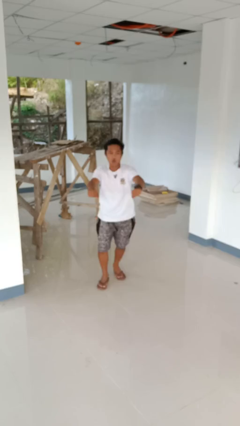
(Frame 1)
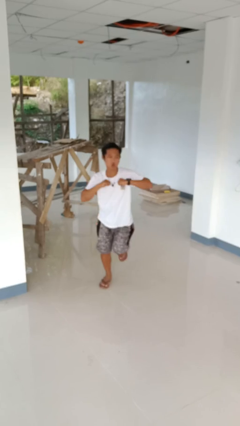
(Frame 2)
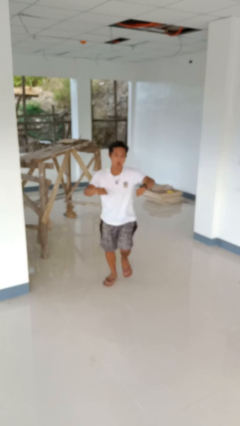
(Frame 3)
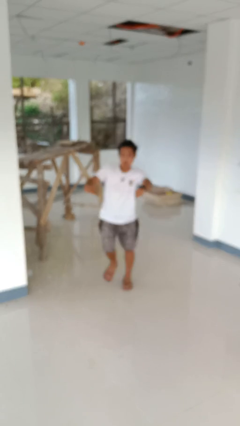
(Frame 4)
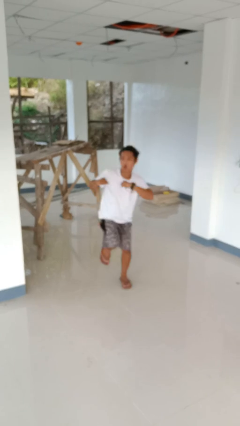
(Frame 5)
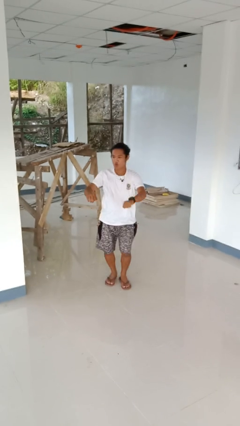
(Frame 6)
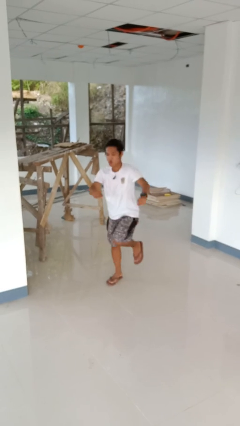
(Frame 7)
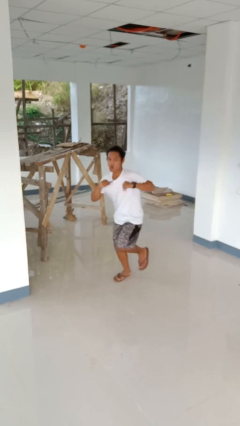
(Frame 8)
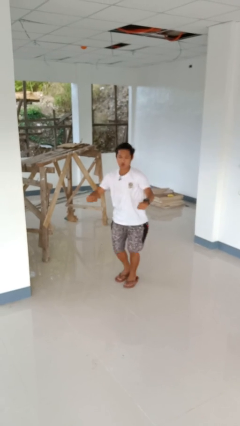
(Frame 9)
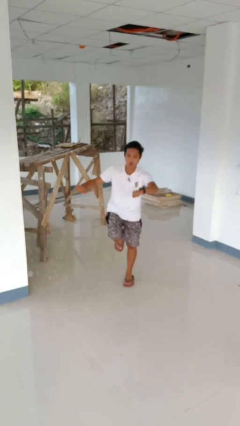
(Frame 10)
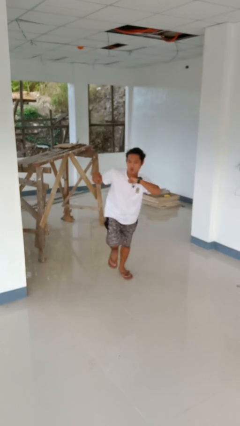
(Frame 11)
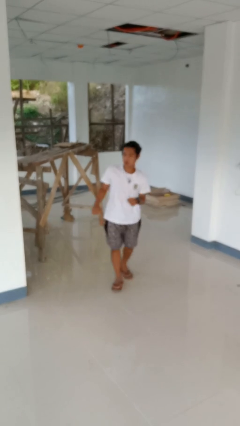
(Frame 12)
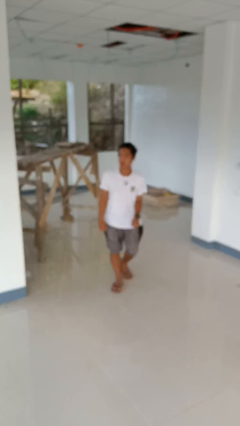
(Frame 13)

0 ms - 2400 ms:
person dances in place

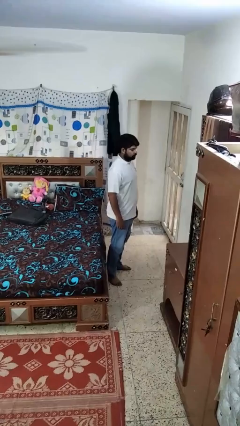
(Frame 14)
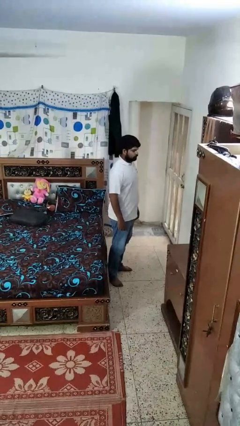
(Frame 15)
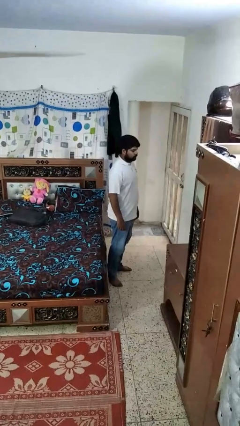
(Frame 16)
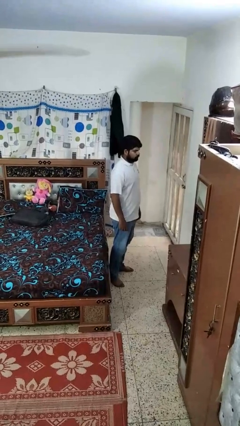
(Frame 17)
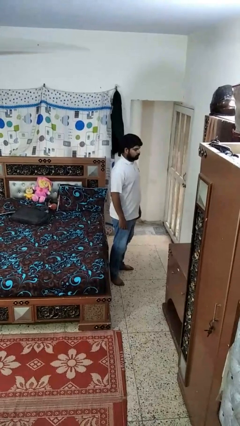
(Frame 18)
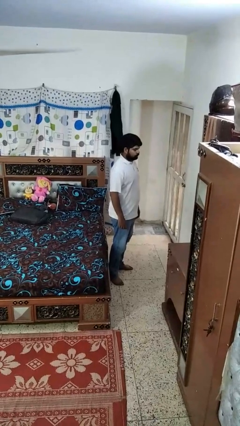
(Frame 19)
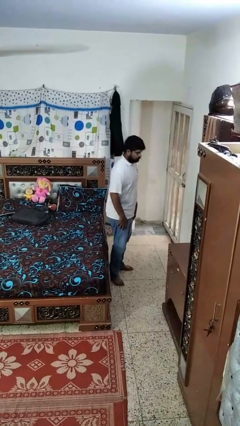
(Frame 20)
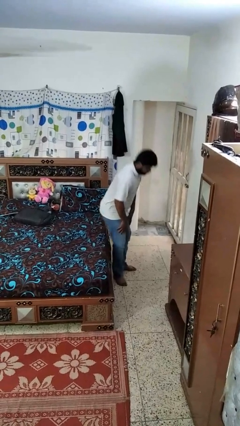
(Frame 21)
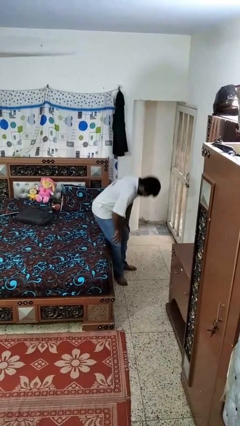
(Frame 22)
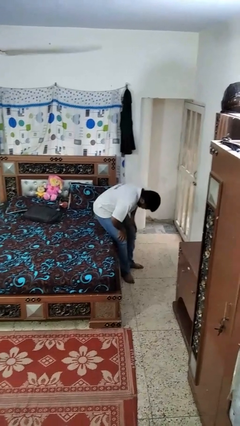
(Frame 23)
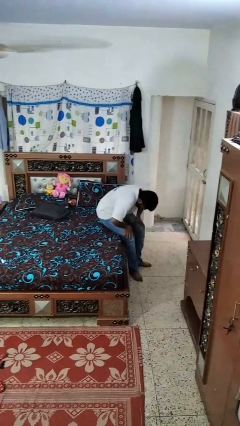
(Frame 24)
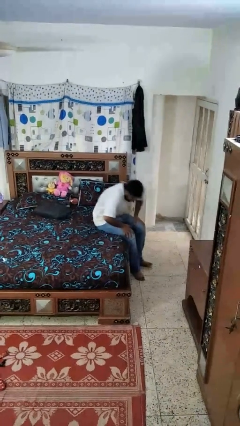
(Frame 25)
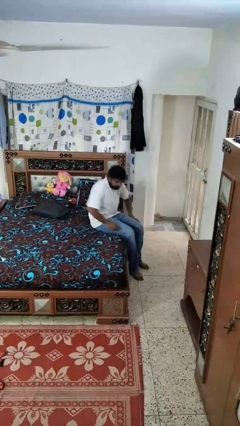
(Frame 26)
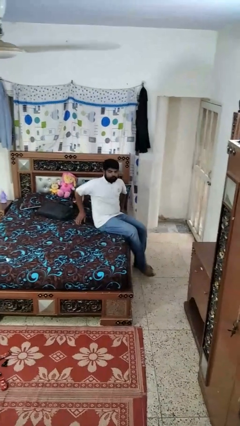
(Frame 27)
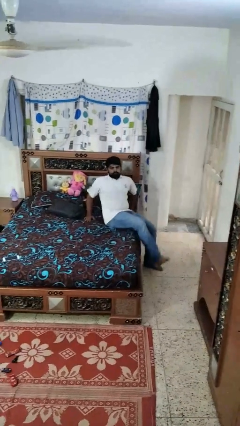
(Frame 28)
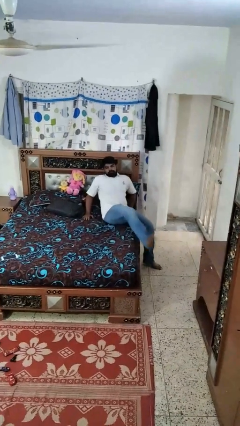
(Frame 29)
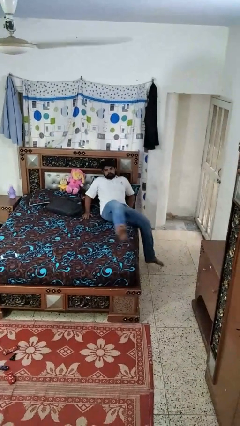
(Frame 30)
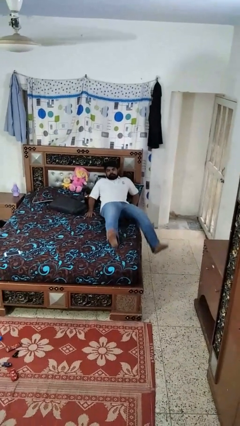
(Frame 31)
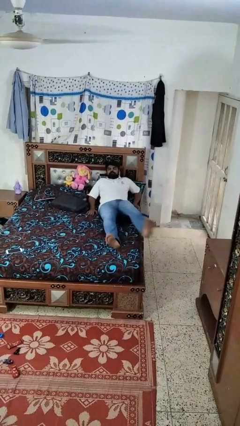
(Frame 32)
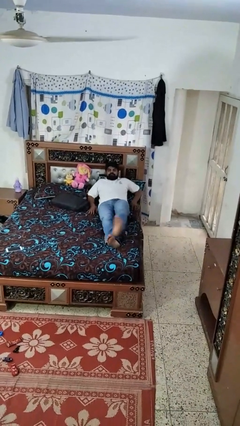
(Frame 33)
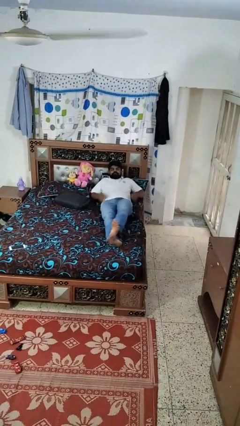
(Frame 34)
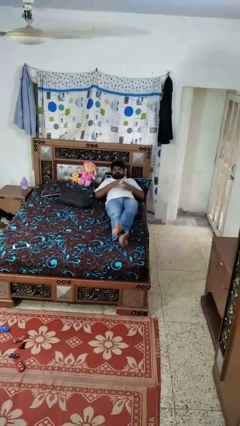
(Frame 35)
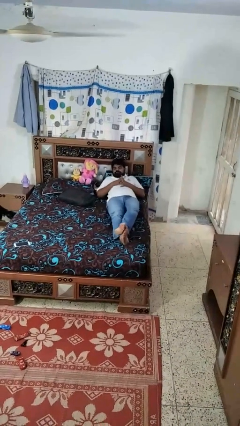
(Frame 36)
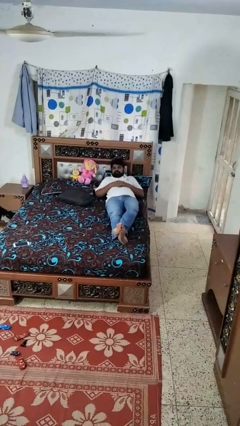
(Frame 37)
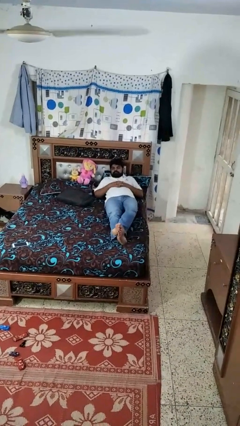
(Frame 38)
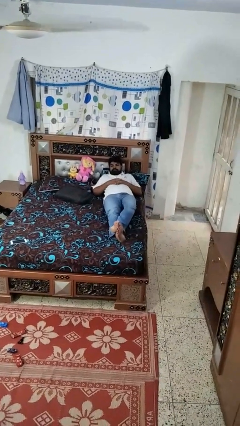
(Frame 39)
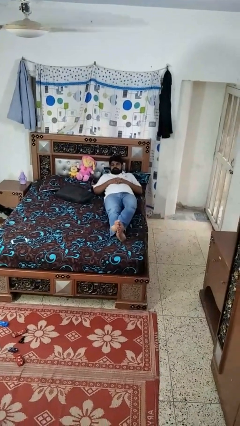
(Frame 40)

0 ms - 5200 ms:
person lies down on bed

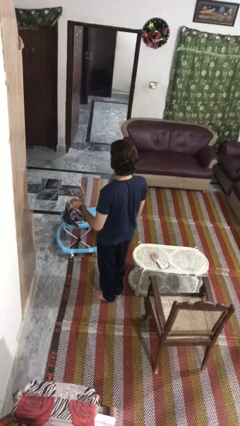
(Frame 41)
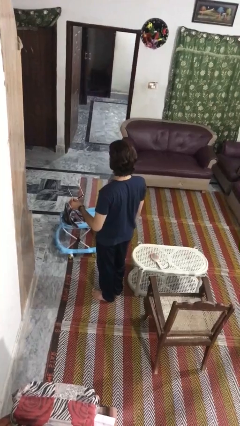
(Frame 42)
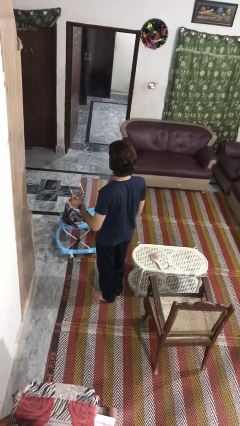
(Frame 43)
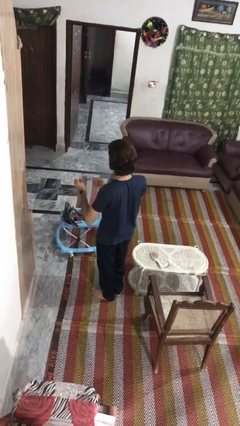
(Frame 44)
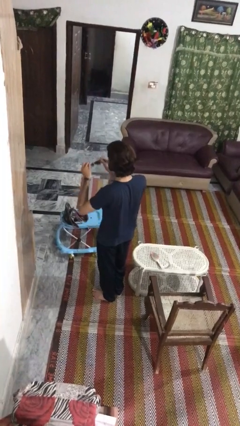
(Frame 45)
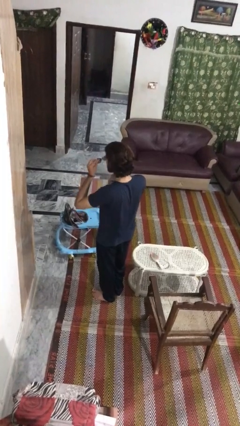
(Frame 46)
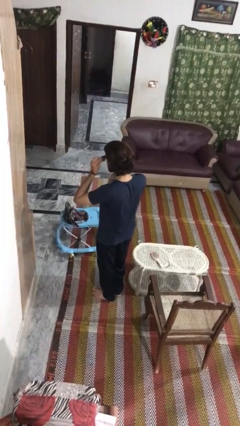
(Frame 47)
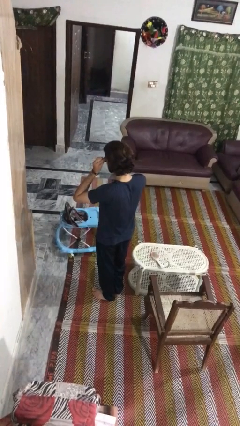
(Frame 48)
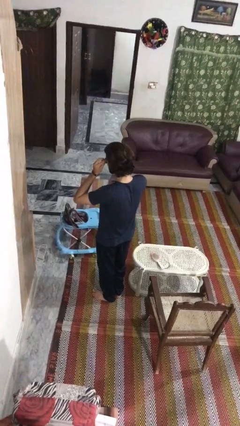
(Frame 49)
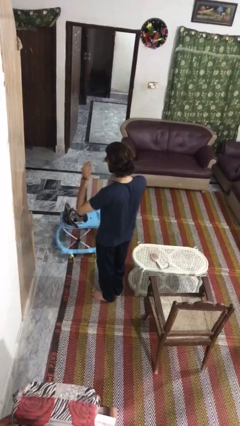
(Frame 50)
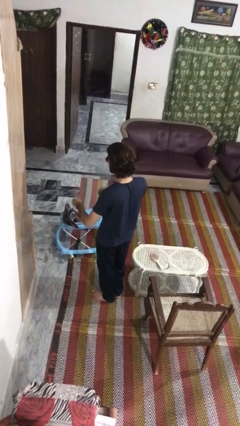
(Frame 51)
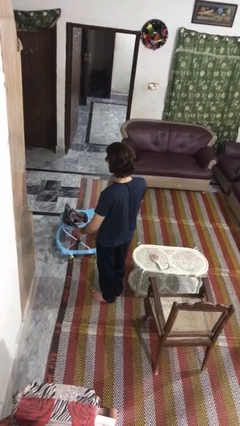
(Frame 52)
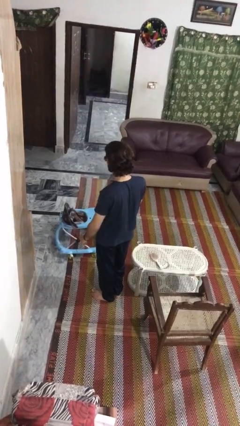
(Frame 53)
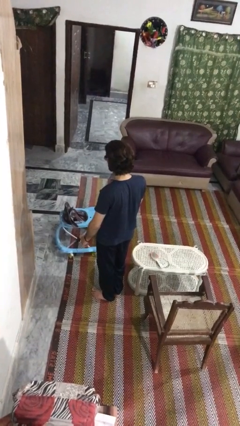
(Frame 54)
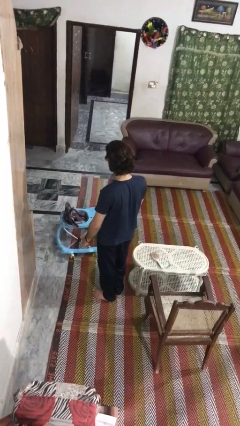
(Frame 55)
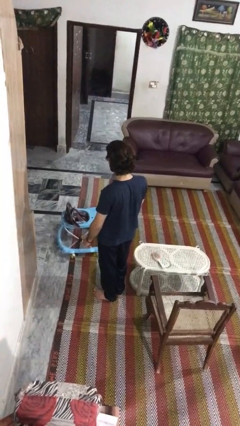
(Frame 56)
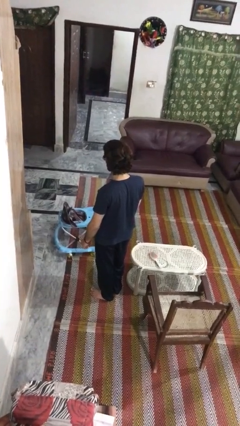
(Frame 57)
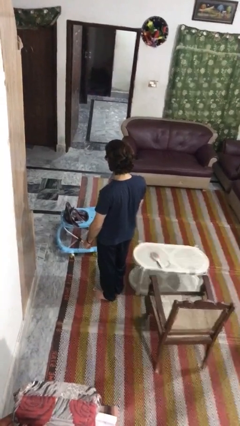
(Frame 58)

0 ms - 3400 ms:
person puts on sunglasses

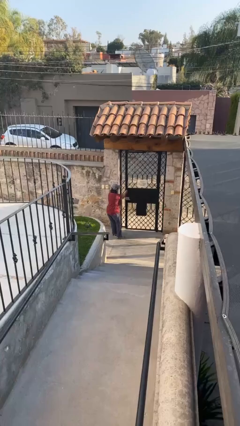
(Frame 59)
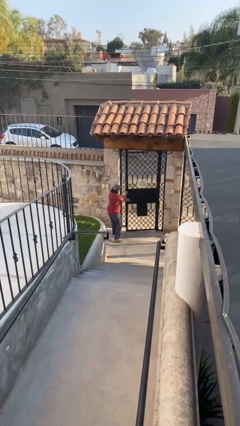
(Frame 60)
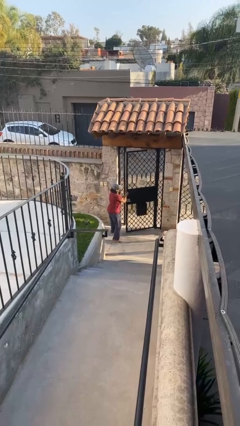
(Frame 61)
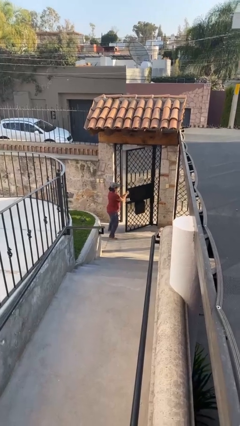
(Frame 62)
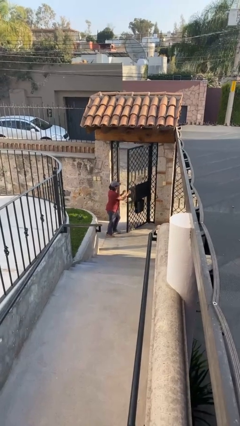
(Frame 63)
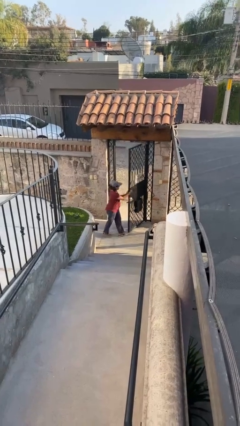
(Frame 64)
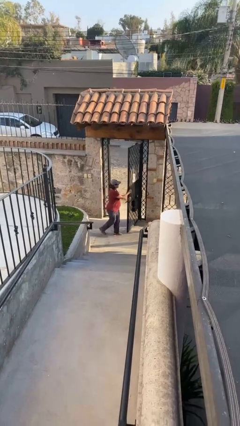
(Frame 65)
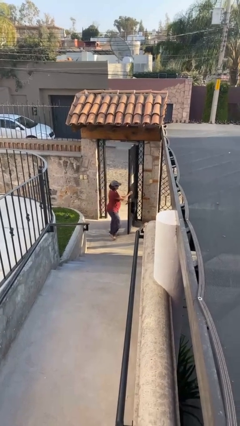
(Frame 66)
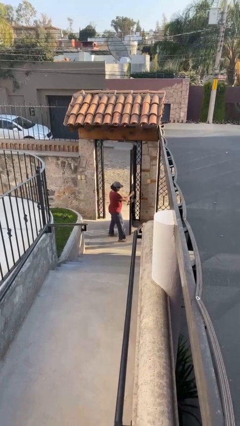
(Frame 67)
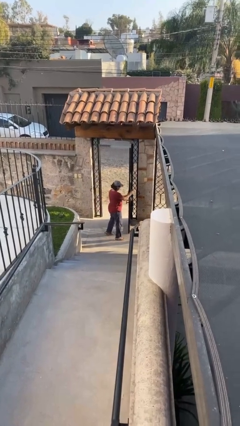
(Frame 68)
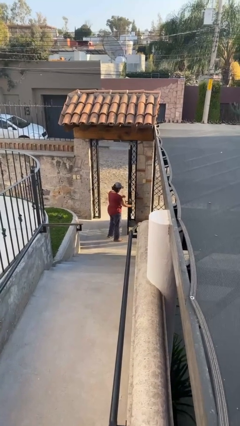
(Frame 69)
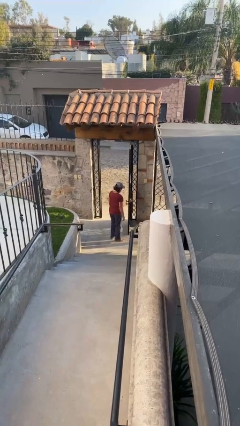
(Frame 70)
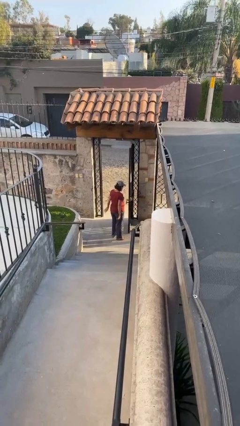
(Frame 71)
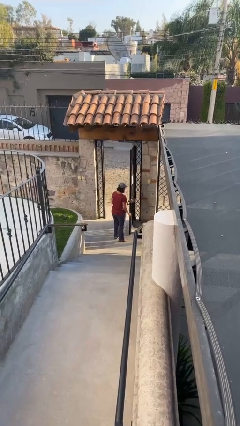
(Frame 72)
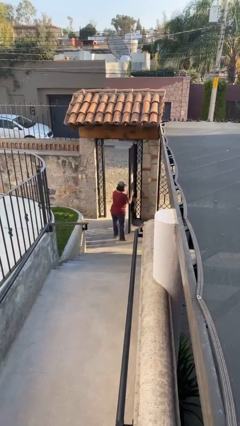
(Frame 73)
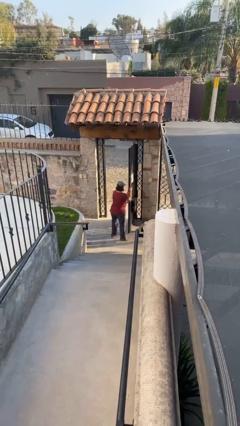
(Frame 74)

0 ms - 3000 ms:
person opens facility door

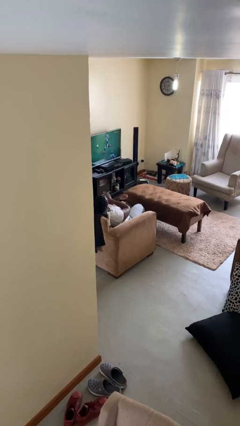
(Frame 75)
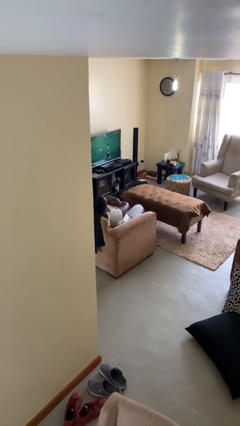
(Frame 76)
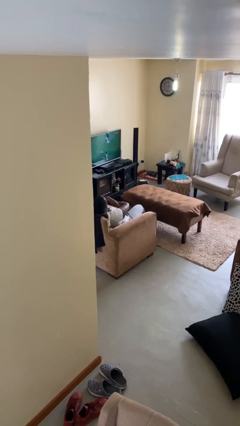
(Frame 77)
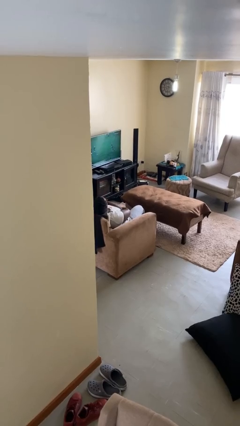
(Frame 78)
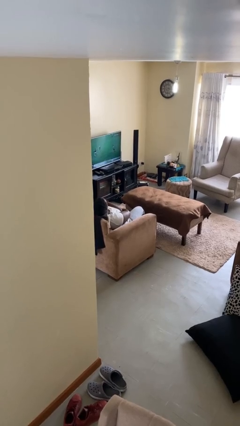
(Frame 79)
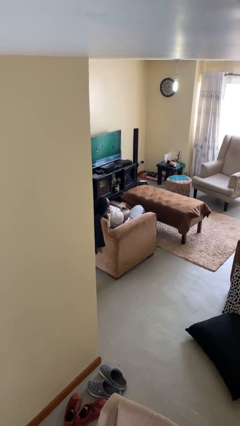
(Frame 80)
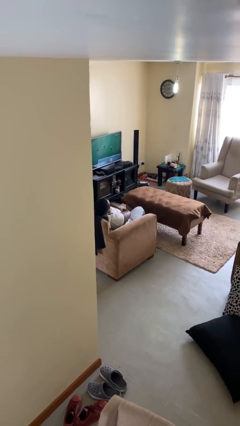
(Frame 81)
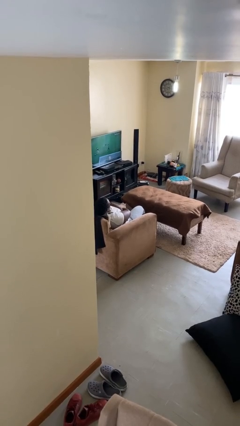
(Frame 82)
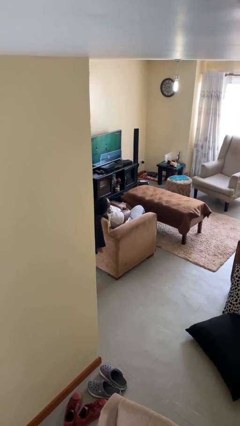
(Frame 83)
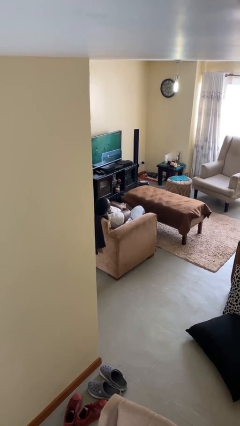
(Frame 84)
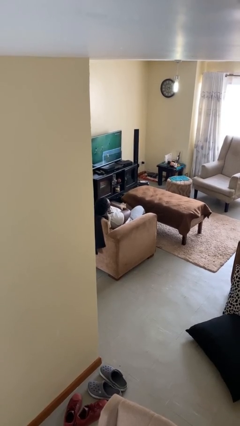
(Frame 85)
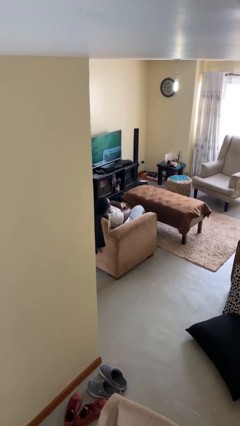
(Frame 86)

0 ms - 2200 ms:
person crosses arms

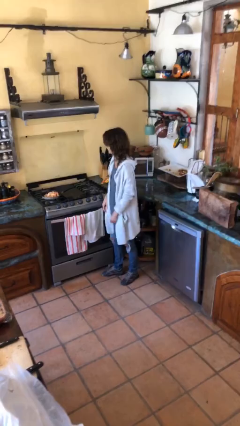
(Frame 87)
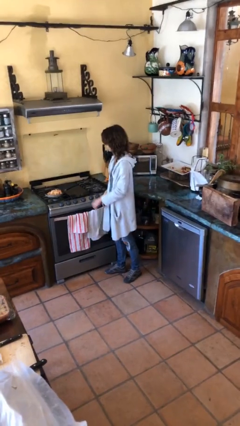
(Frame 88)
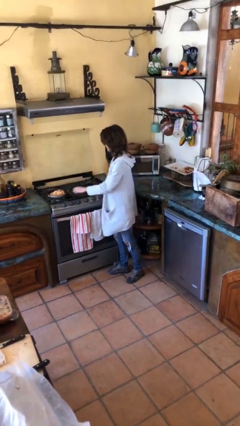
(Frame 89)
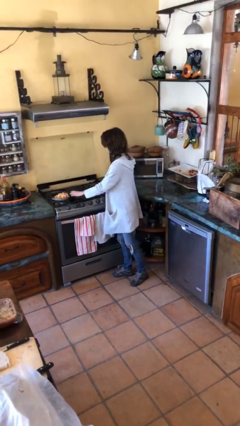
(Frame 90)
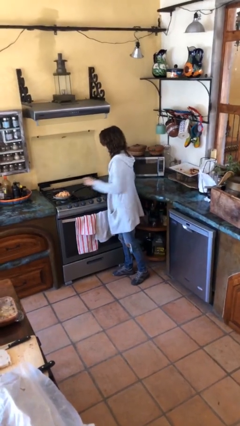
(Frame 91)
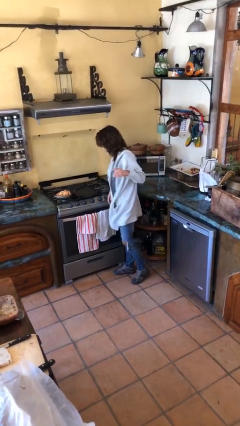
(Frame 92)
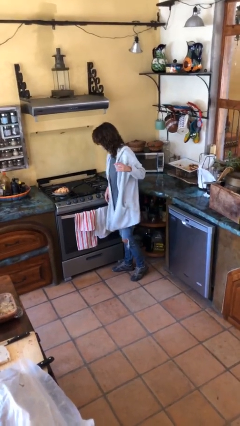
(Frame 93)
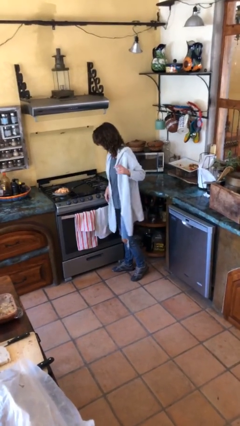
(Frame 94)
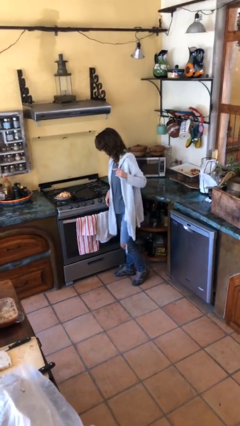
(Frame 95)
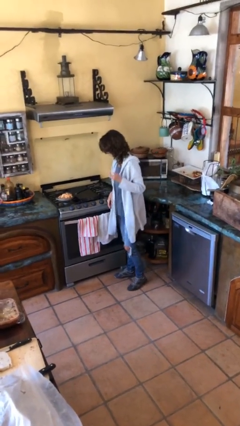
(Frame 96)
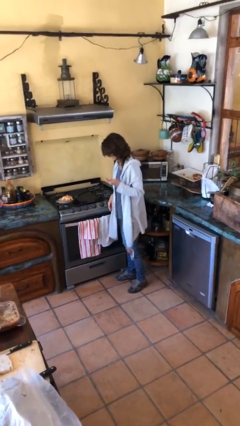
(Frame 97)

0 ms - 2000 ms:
person burns hand
